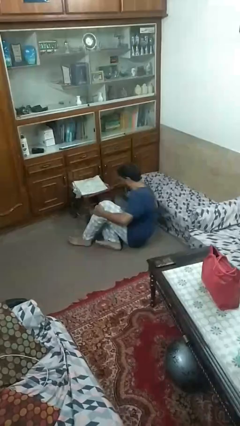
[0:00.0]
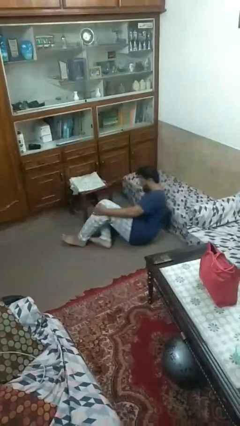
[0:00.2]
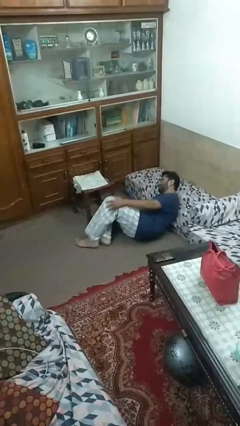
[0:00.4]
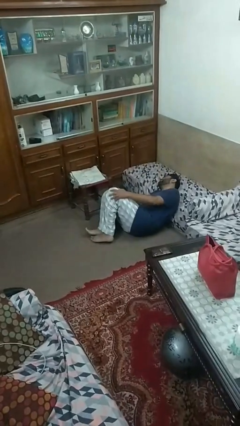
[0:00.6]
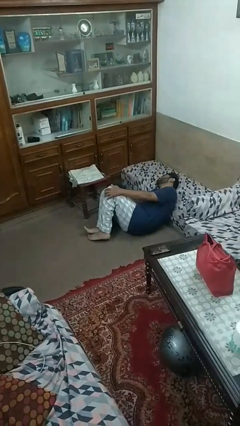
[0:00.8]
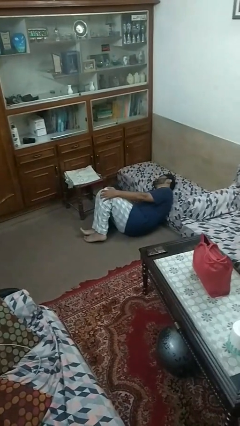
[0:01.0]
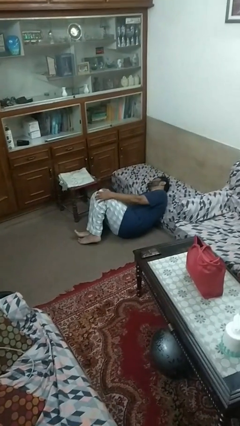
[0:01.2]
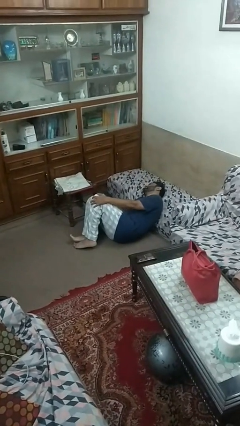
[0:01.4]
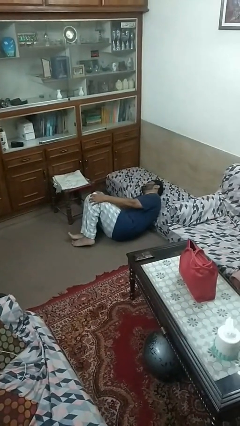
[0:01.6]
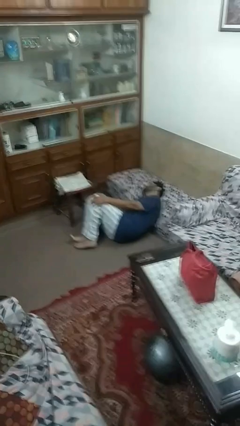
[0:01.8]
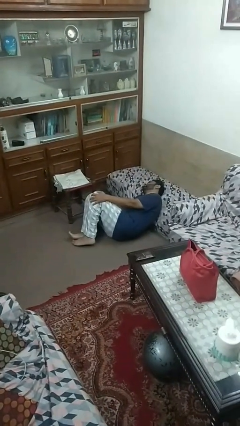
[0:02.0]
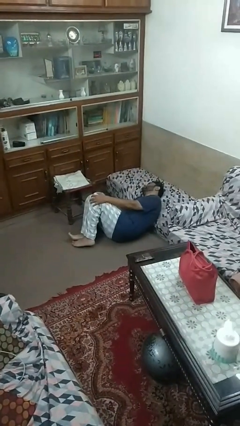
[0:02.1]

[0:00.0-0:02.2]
person lies down on floor

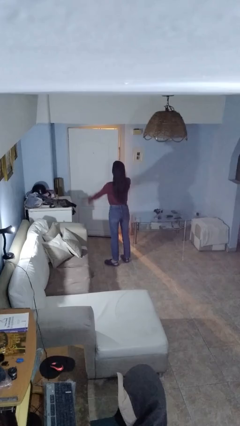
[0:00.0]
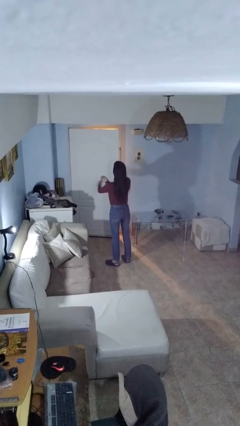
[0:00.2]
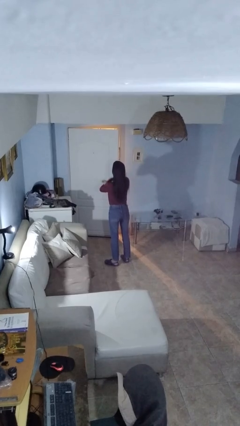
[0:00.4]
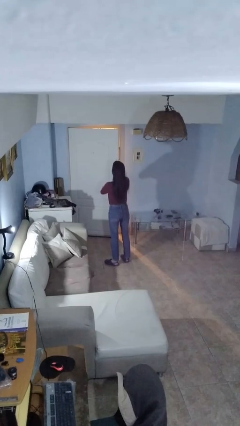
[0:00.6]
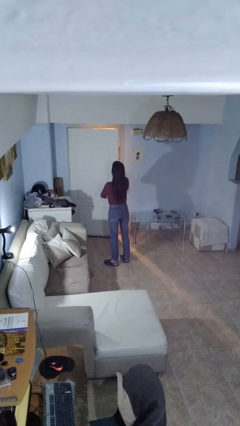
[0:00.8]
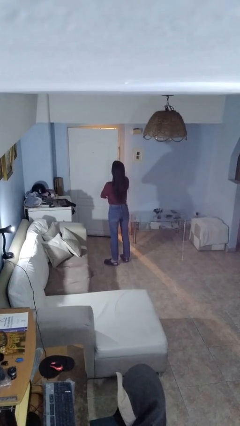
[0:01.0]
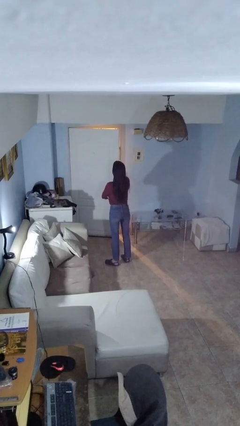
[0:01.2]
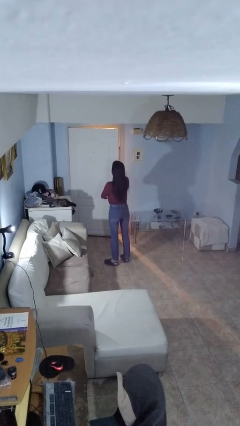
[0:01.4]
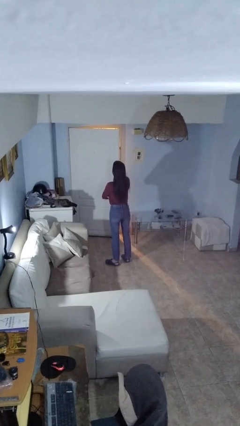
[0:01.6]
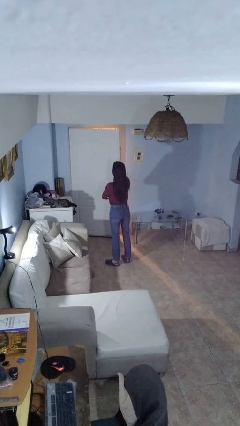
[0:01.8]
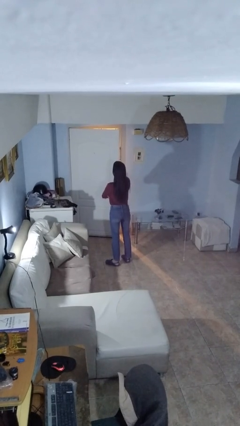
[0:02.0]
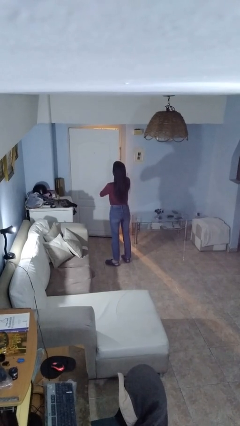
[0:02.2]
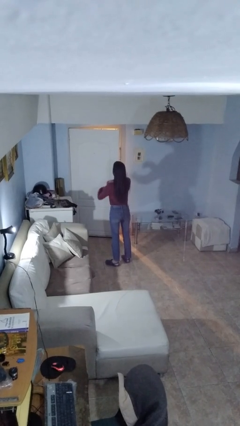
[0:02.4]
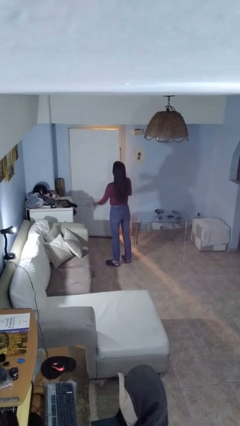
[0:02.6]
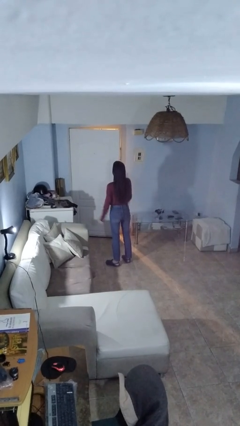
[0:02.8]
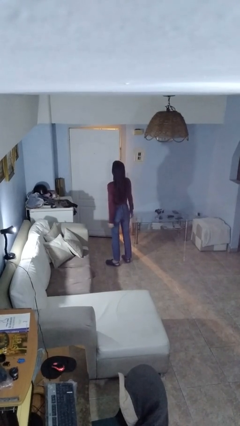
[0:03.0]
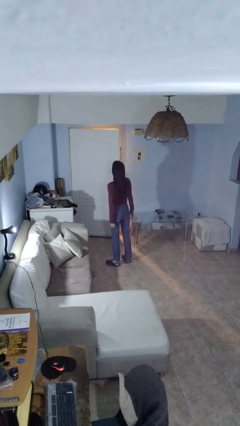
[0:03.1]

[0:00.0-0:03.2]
person crosses arms

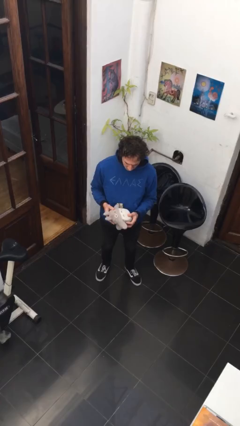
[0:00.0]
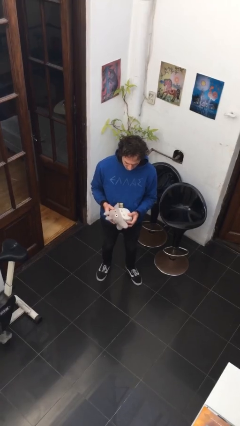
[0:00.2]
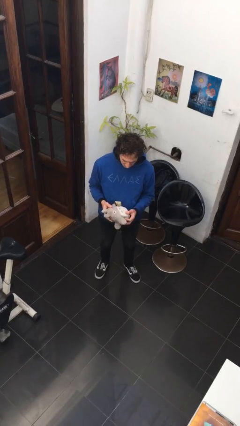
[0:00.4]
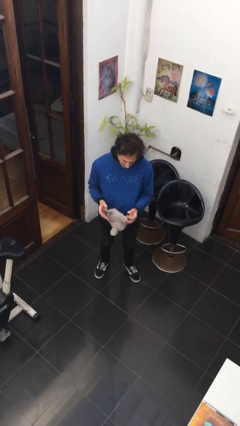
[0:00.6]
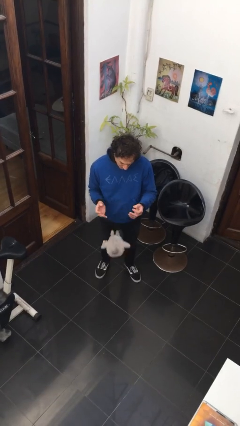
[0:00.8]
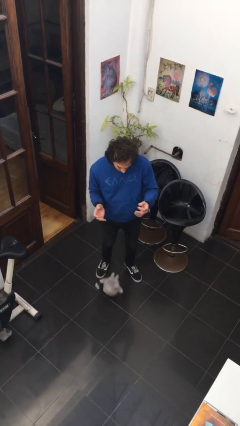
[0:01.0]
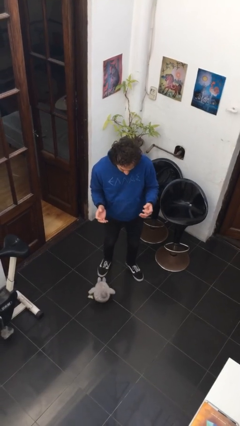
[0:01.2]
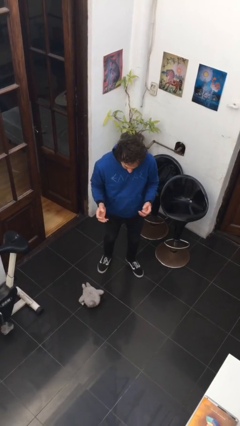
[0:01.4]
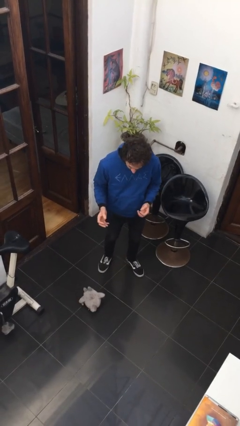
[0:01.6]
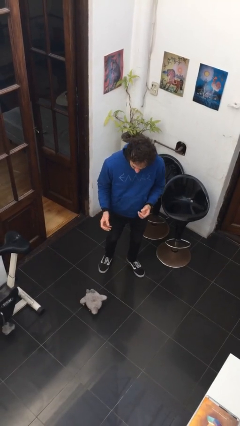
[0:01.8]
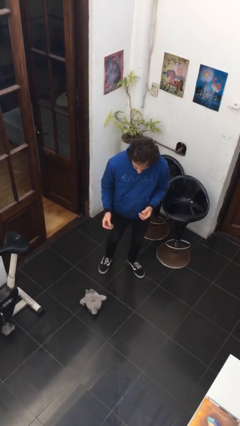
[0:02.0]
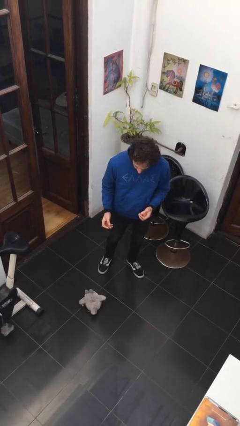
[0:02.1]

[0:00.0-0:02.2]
person drops object

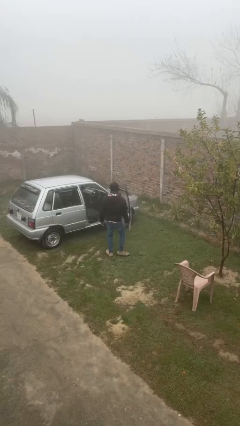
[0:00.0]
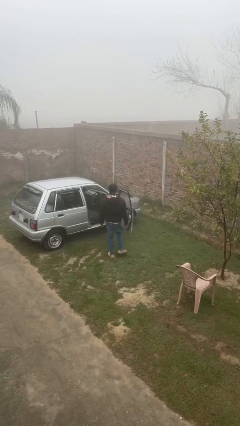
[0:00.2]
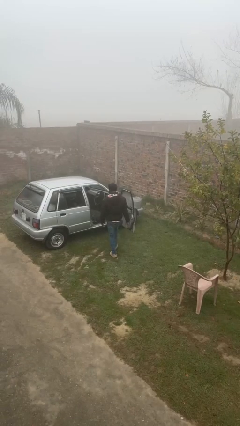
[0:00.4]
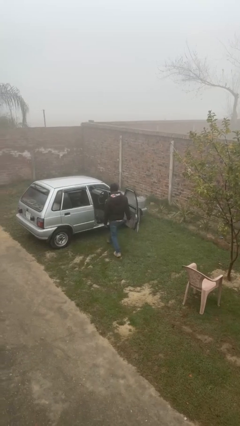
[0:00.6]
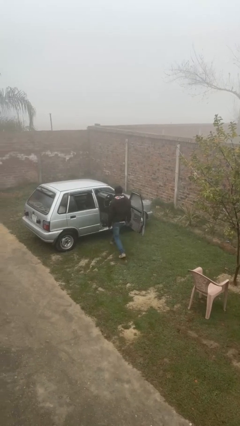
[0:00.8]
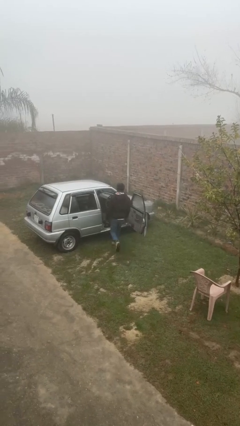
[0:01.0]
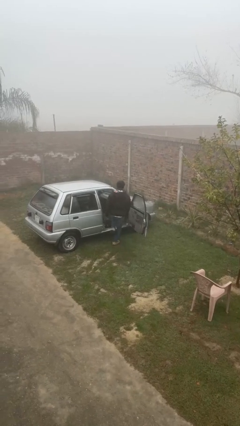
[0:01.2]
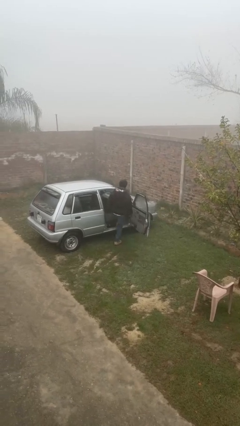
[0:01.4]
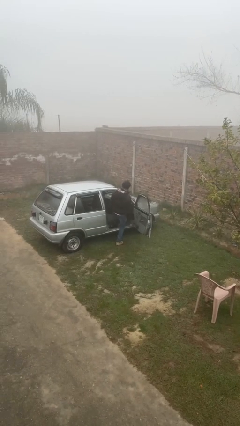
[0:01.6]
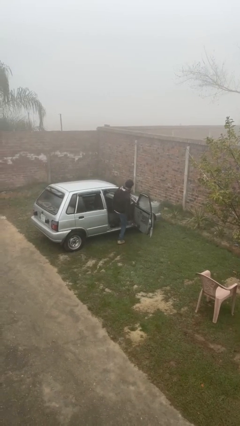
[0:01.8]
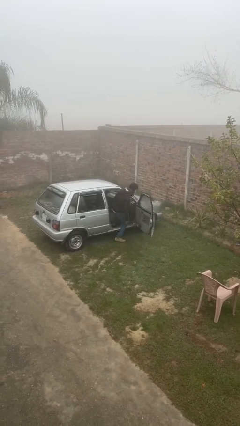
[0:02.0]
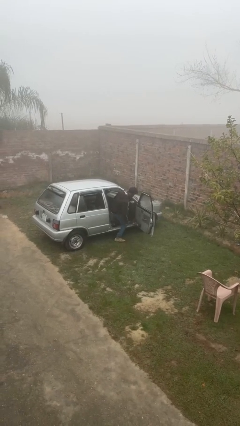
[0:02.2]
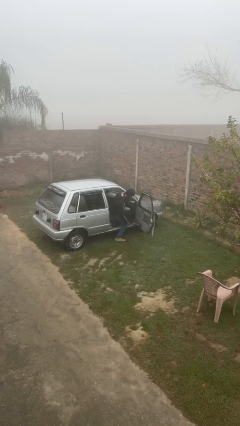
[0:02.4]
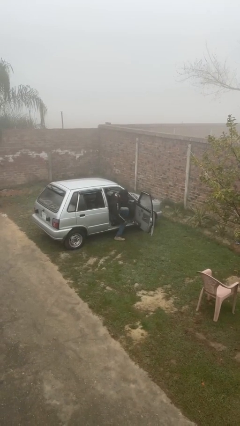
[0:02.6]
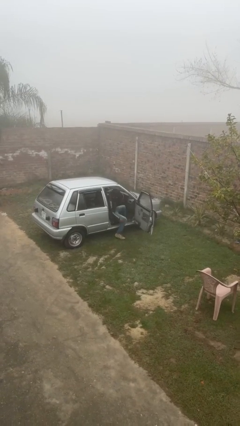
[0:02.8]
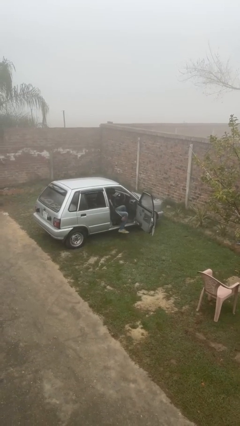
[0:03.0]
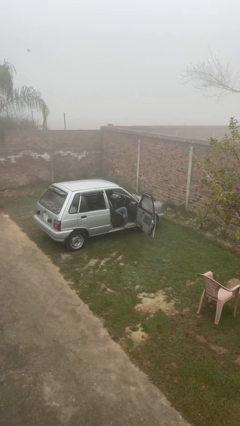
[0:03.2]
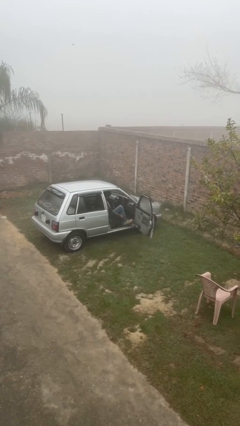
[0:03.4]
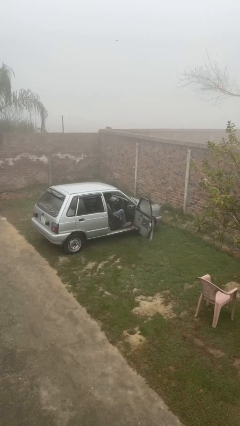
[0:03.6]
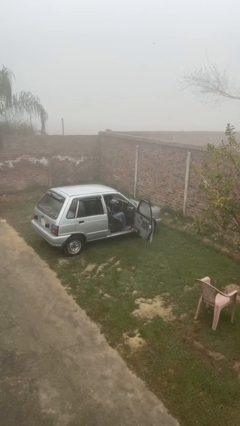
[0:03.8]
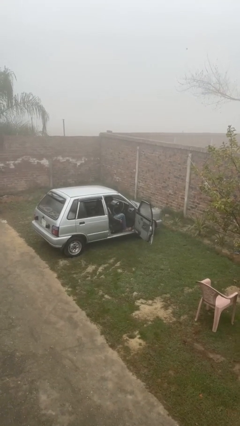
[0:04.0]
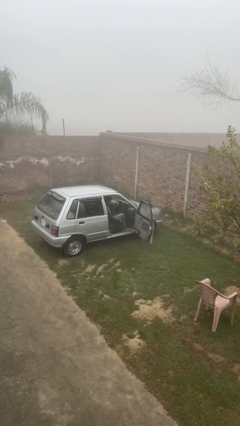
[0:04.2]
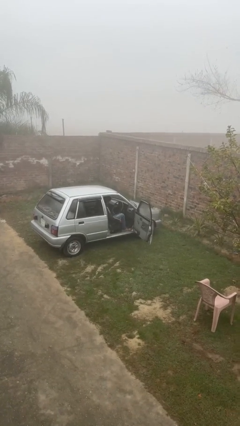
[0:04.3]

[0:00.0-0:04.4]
person enters car

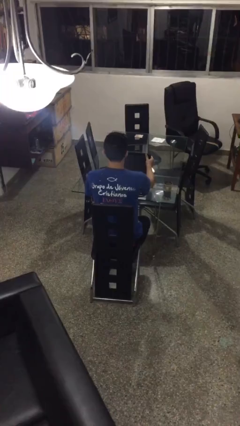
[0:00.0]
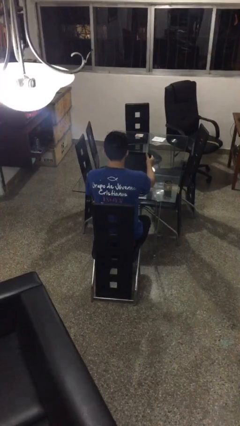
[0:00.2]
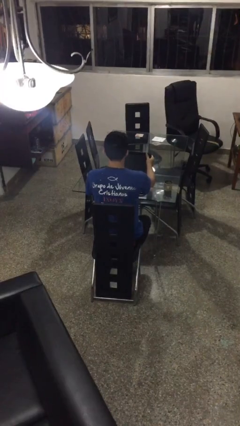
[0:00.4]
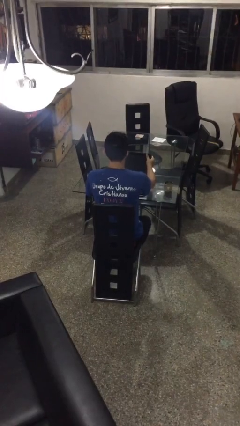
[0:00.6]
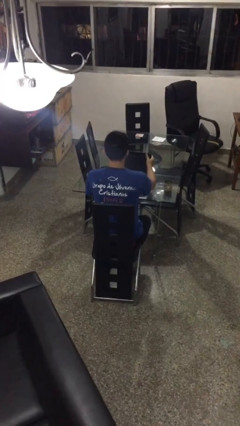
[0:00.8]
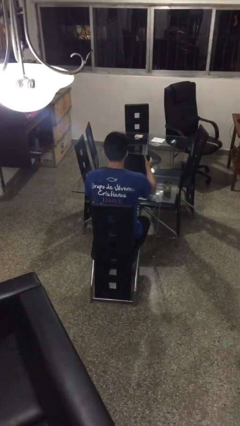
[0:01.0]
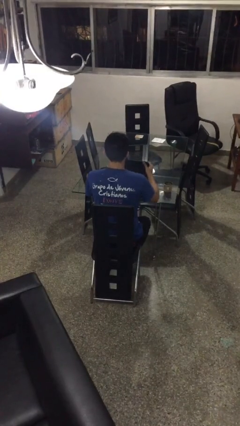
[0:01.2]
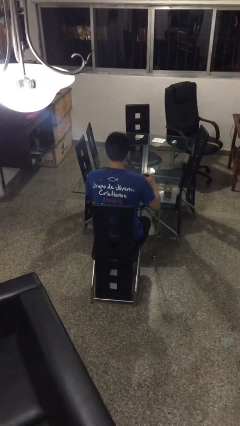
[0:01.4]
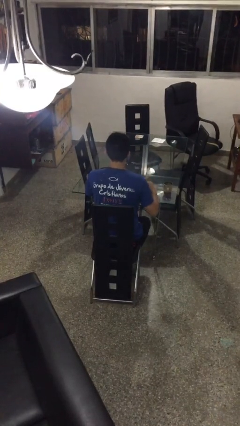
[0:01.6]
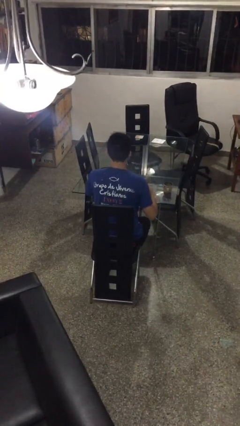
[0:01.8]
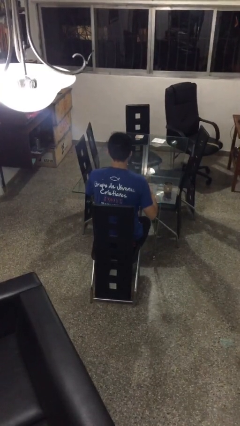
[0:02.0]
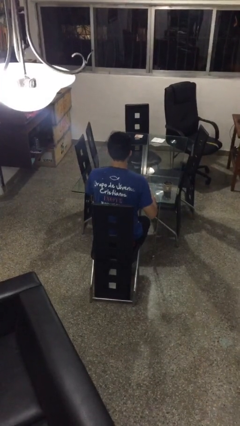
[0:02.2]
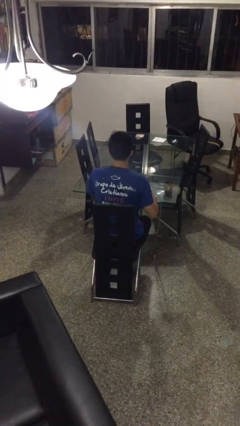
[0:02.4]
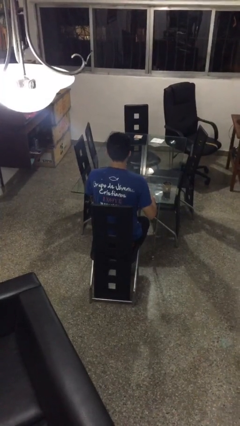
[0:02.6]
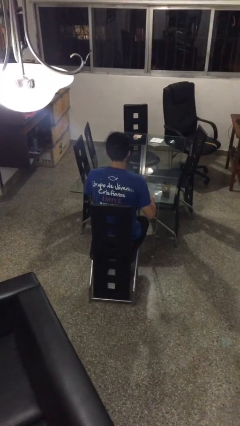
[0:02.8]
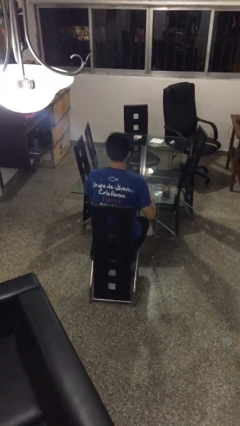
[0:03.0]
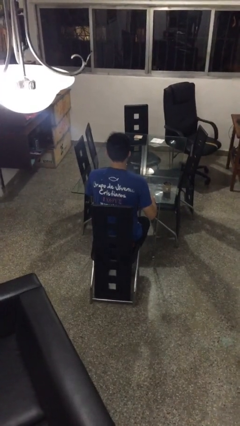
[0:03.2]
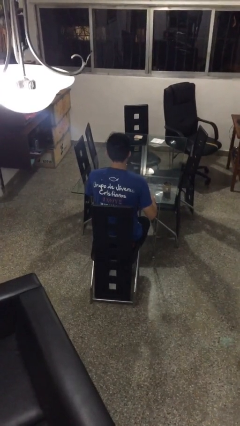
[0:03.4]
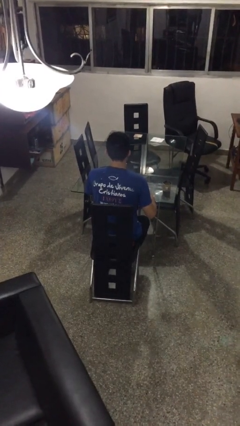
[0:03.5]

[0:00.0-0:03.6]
person closes laptop

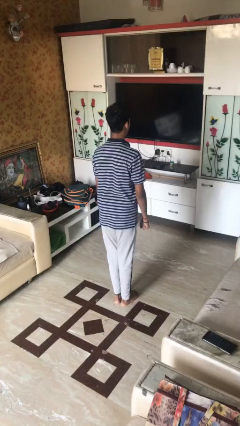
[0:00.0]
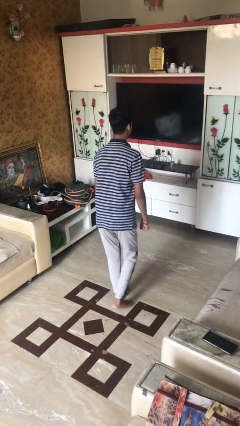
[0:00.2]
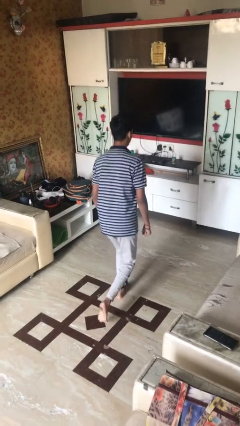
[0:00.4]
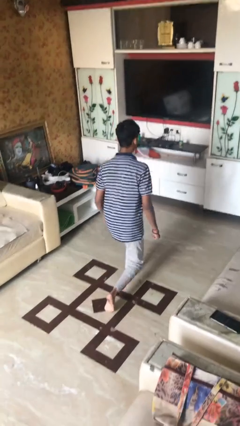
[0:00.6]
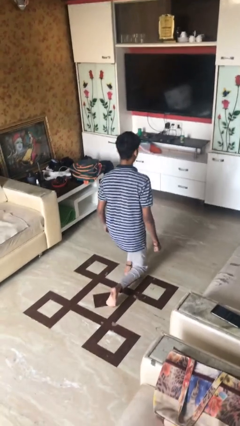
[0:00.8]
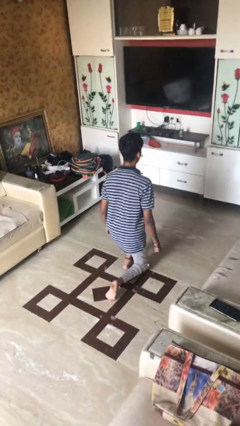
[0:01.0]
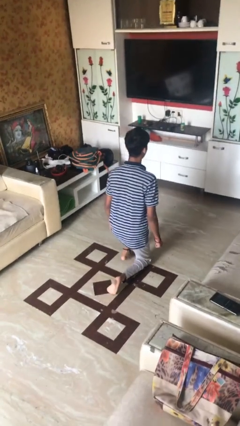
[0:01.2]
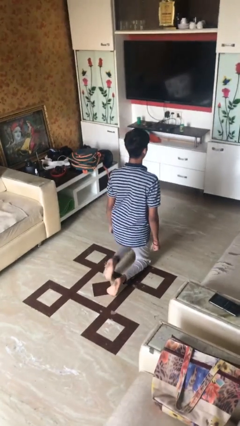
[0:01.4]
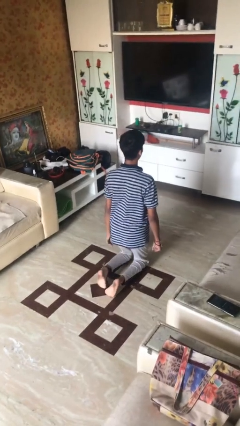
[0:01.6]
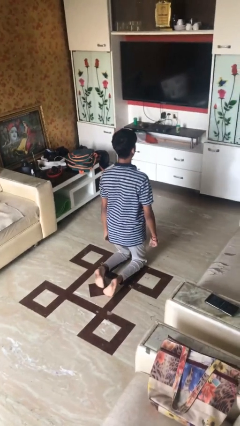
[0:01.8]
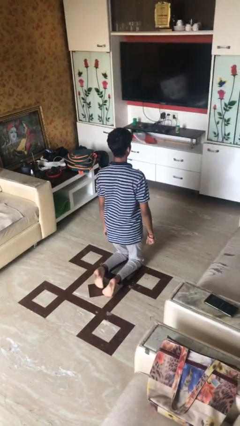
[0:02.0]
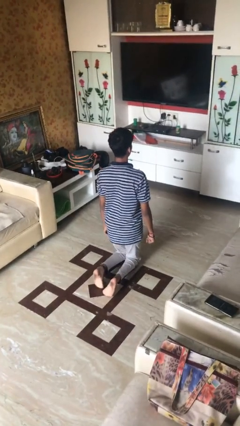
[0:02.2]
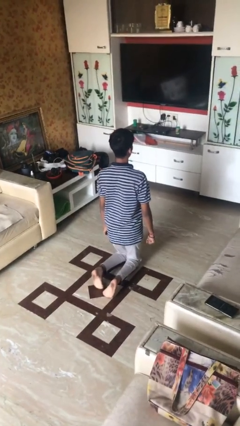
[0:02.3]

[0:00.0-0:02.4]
person kneels
